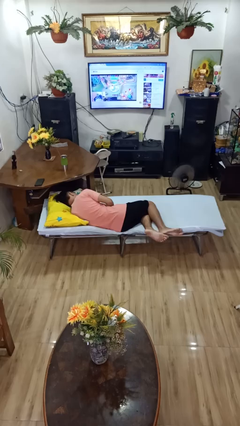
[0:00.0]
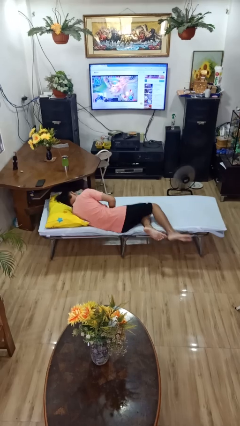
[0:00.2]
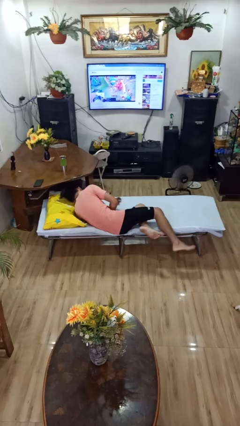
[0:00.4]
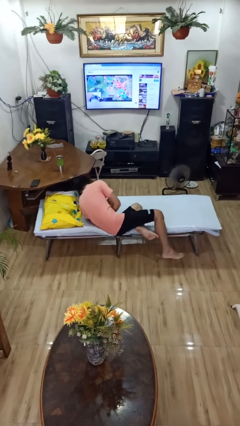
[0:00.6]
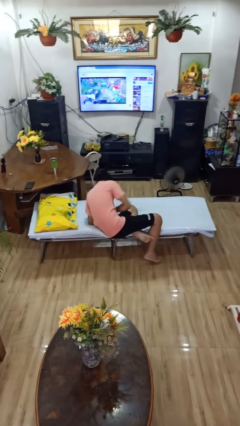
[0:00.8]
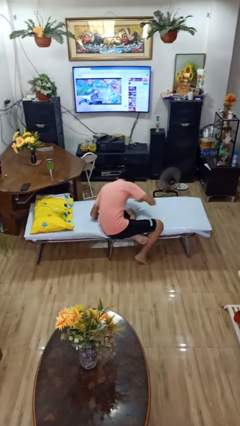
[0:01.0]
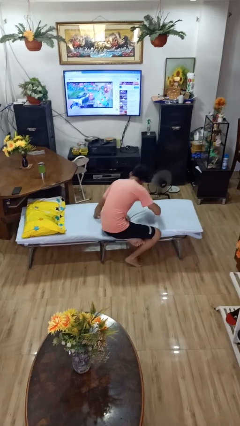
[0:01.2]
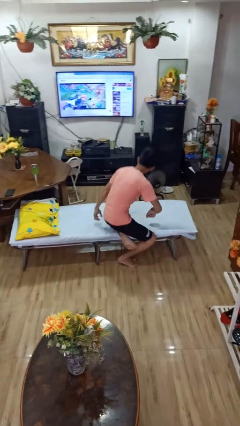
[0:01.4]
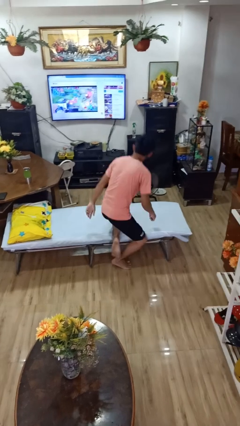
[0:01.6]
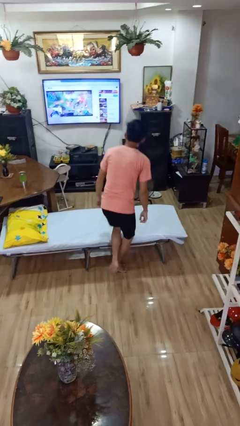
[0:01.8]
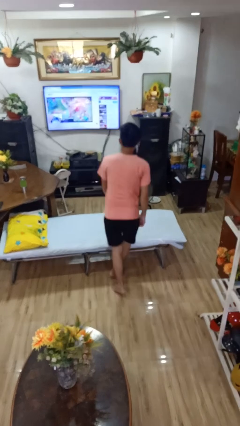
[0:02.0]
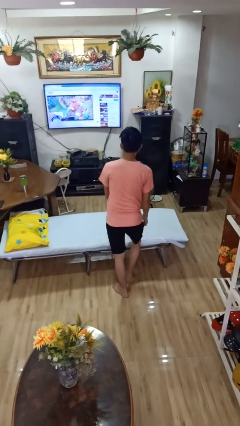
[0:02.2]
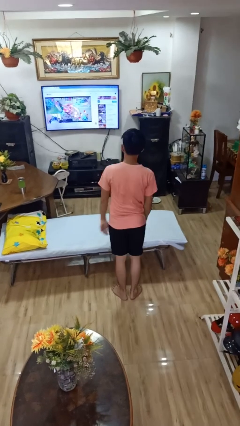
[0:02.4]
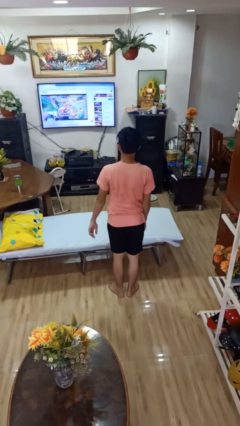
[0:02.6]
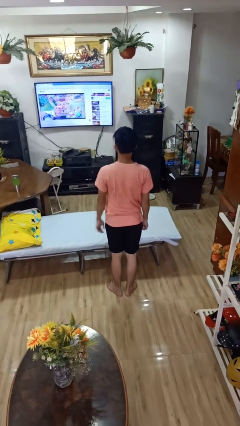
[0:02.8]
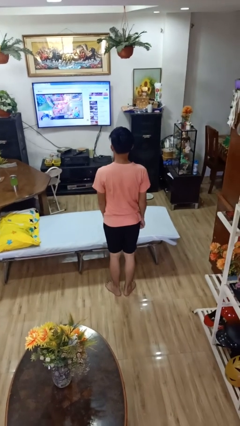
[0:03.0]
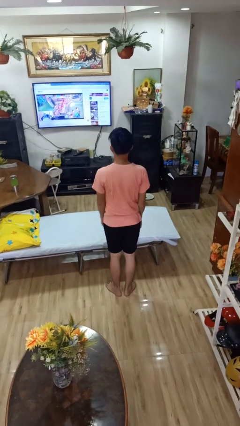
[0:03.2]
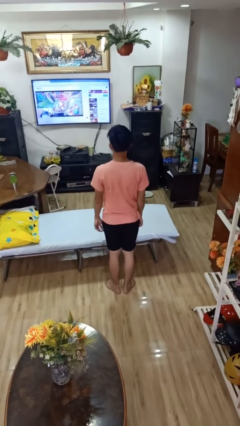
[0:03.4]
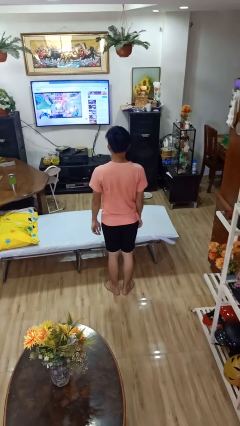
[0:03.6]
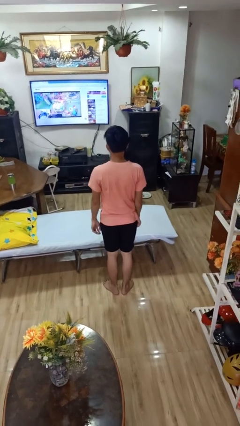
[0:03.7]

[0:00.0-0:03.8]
person stands up

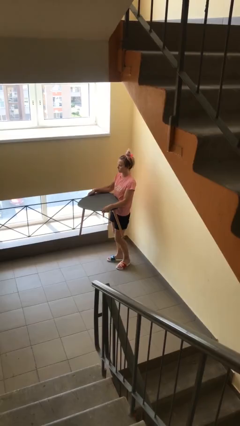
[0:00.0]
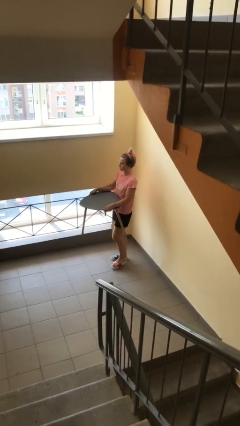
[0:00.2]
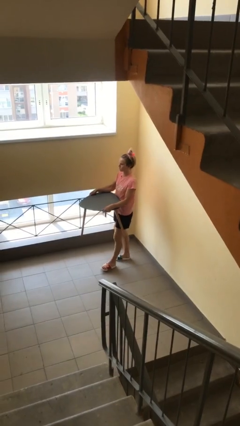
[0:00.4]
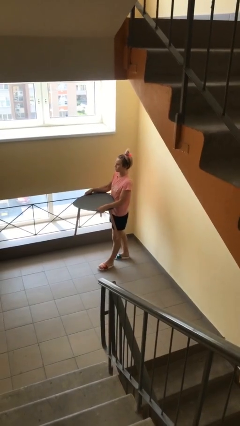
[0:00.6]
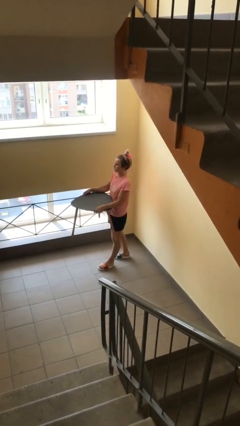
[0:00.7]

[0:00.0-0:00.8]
person carries furniture

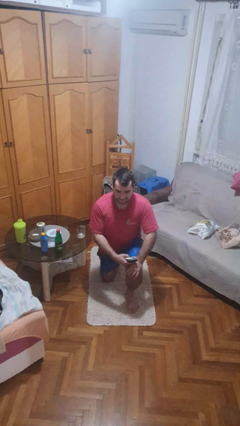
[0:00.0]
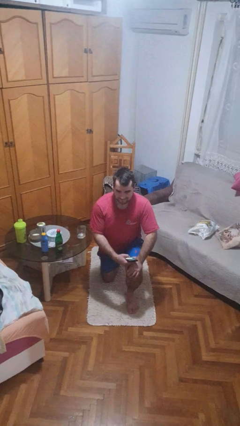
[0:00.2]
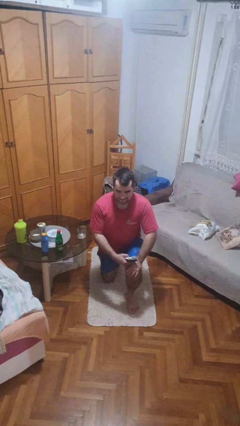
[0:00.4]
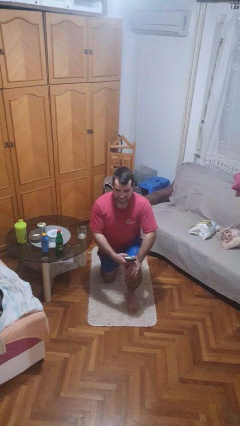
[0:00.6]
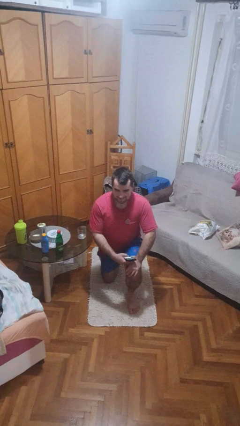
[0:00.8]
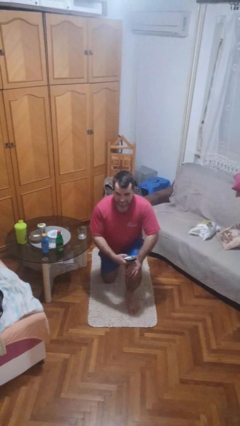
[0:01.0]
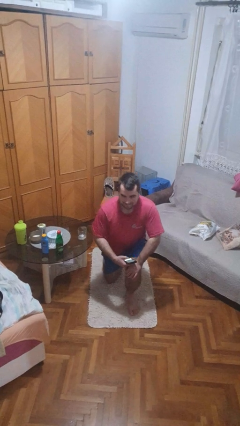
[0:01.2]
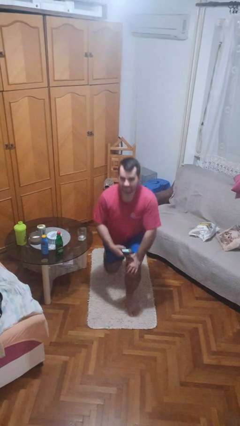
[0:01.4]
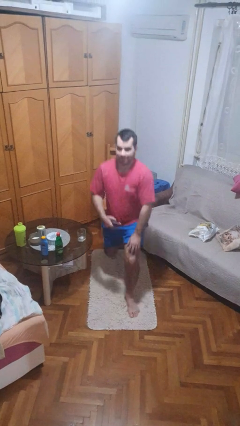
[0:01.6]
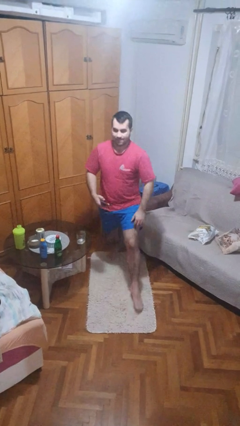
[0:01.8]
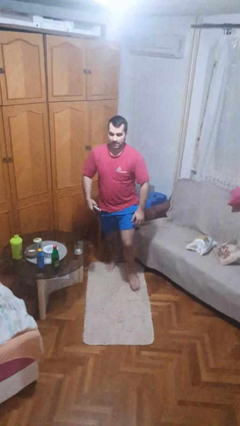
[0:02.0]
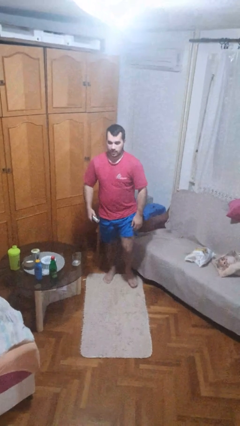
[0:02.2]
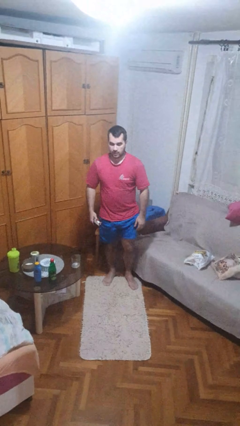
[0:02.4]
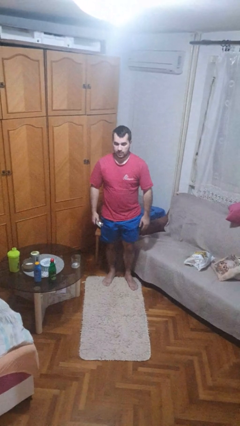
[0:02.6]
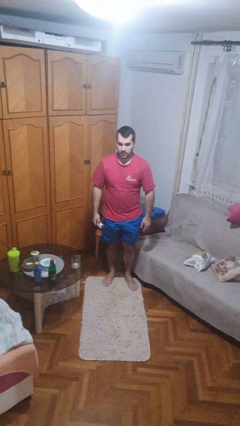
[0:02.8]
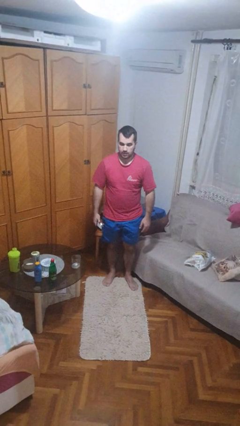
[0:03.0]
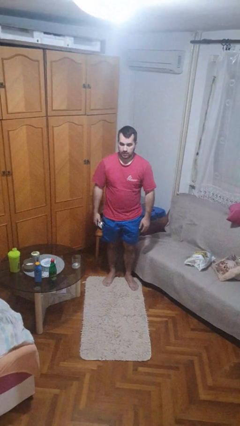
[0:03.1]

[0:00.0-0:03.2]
person stands up from floor

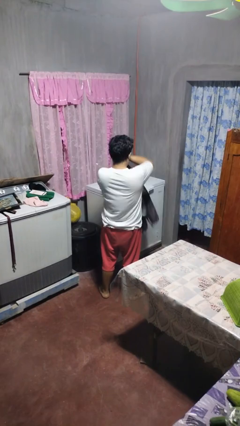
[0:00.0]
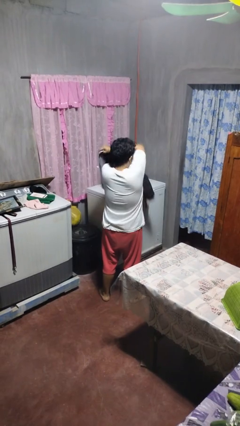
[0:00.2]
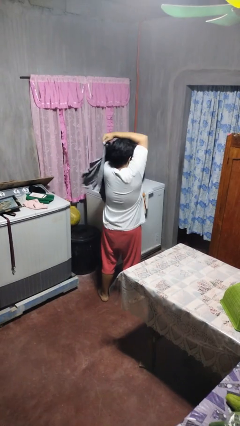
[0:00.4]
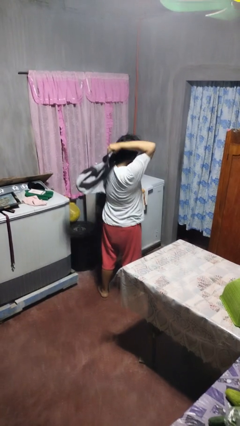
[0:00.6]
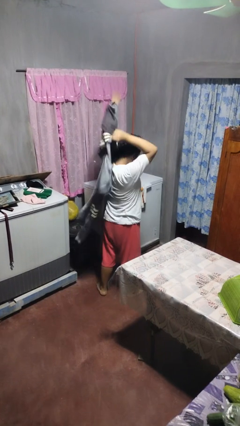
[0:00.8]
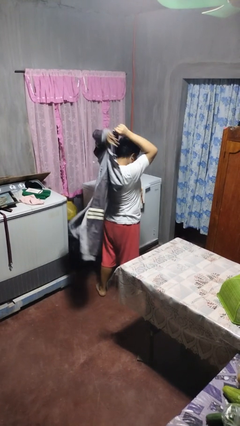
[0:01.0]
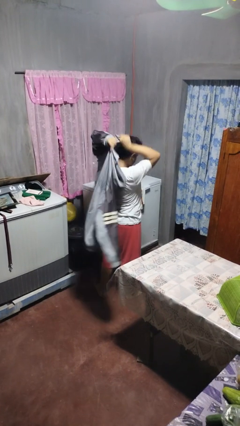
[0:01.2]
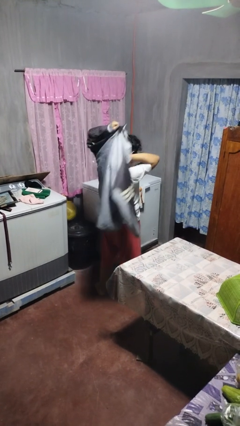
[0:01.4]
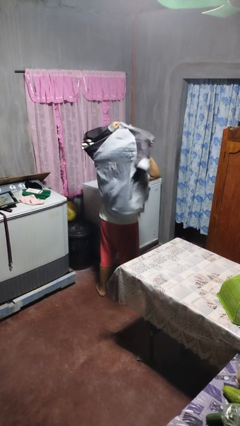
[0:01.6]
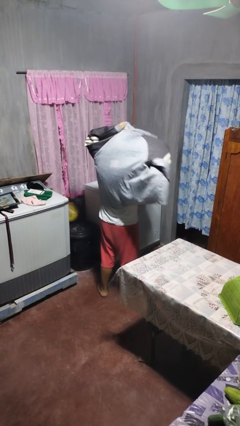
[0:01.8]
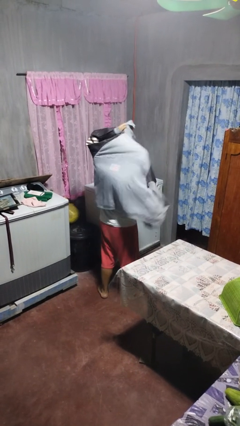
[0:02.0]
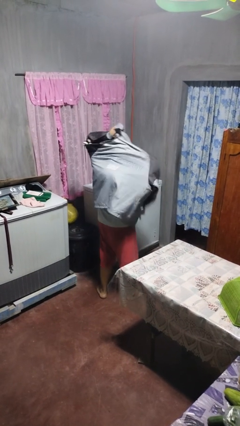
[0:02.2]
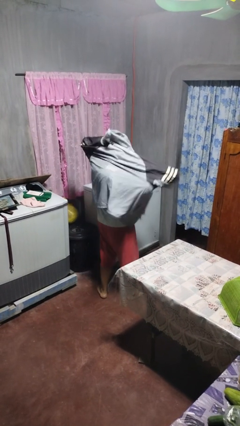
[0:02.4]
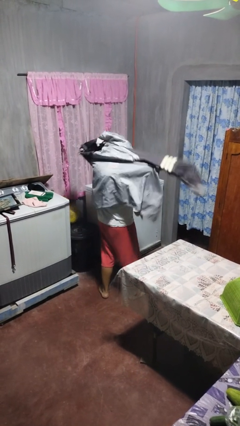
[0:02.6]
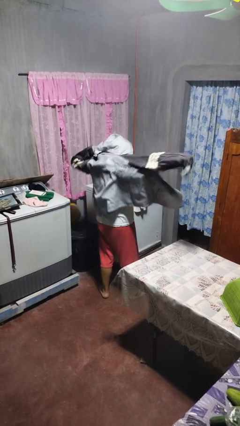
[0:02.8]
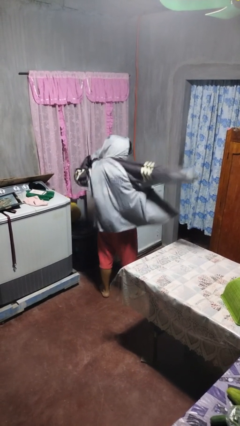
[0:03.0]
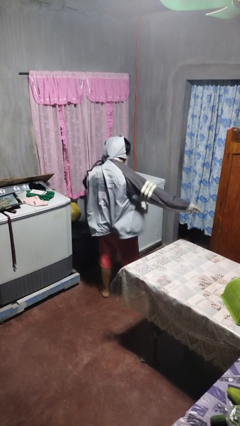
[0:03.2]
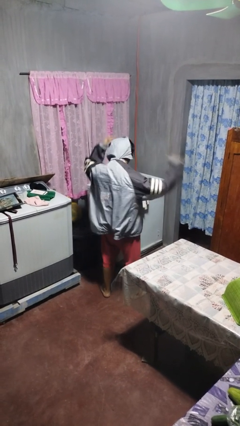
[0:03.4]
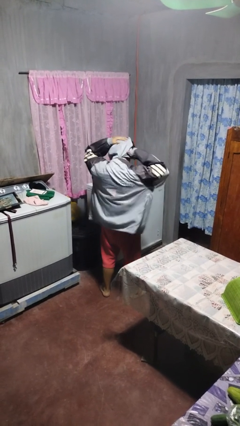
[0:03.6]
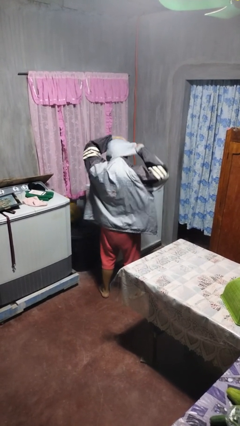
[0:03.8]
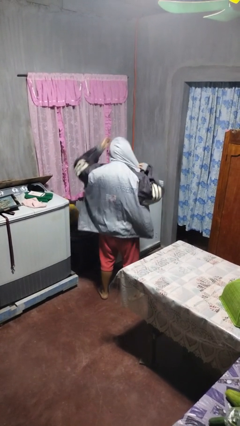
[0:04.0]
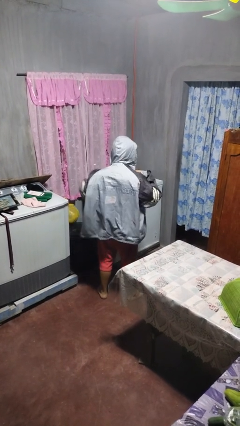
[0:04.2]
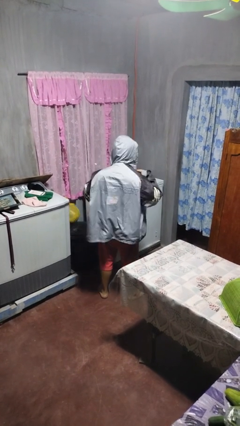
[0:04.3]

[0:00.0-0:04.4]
person puts on hoodie

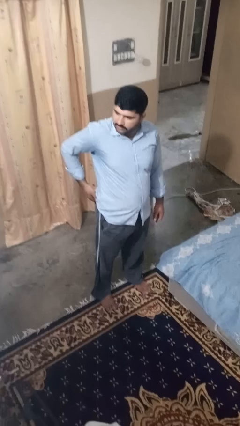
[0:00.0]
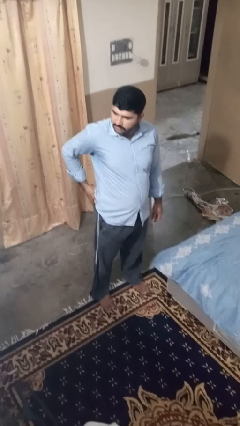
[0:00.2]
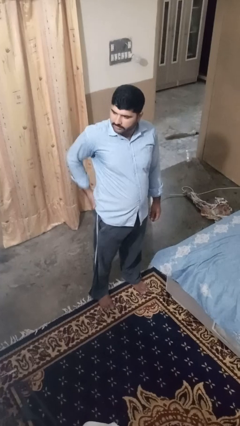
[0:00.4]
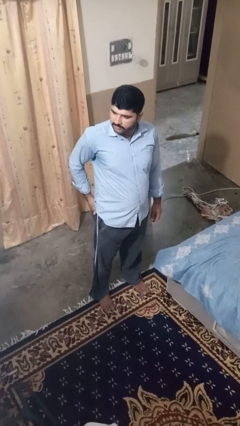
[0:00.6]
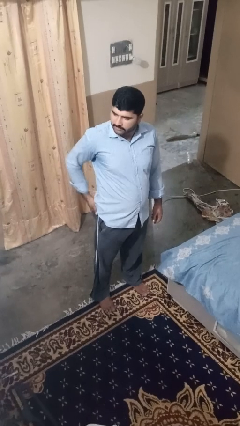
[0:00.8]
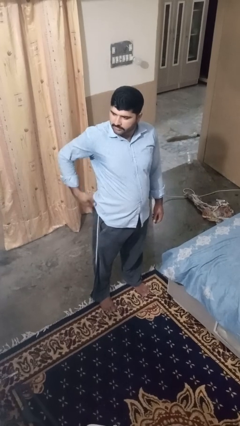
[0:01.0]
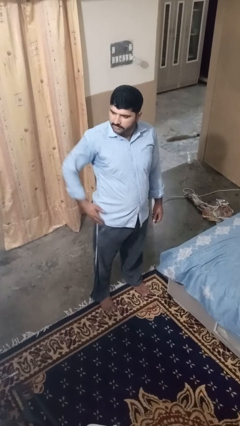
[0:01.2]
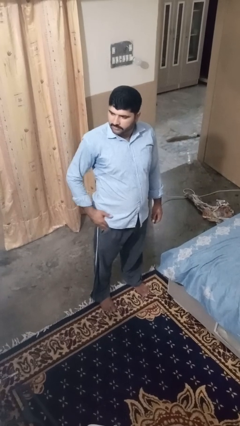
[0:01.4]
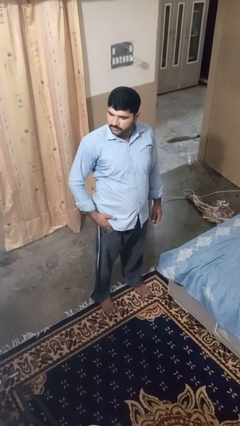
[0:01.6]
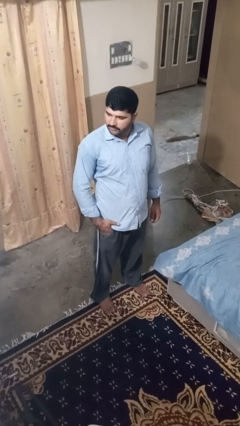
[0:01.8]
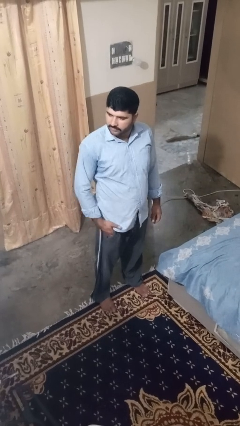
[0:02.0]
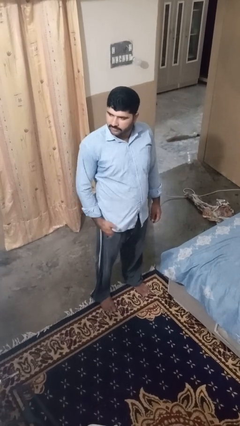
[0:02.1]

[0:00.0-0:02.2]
person puts hands in back pockets

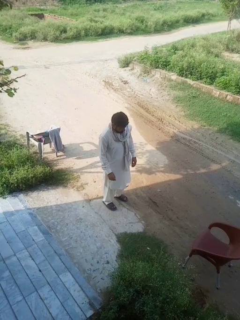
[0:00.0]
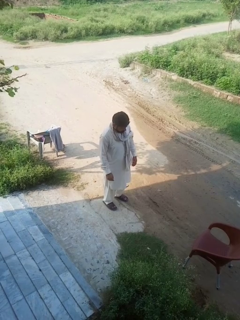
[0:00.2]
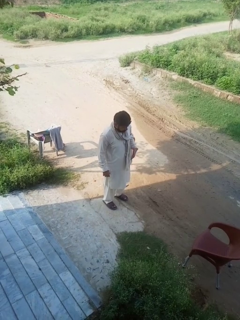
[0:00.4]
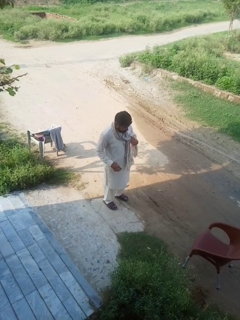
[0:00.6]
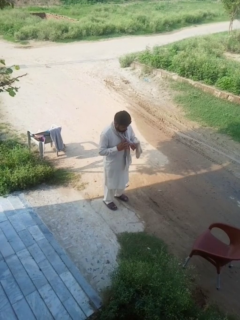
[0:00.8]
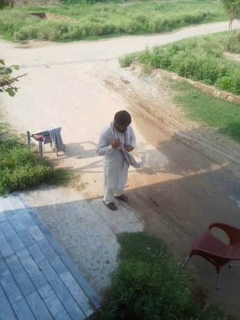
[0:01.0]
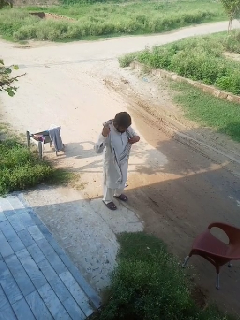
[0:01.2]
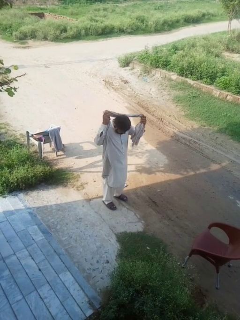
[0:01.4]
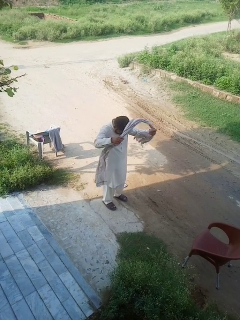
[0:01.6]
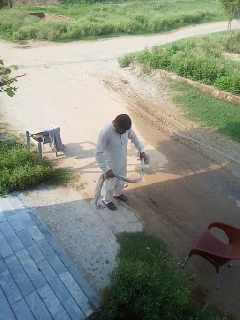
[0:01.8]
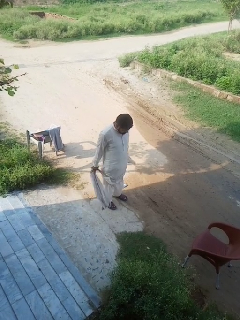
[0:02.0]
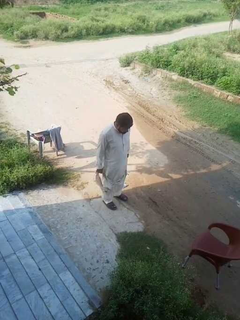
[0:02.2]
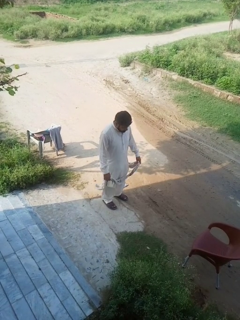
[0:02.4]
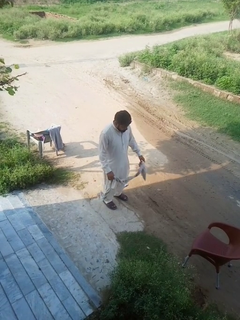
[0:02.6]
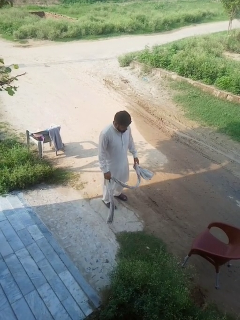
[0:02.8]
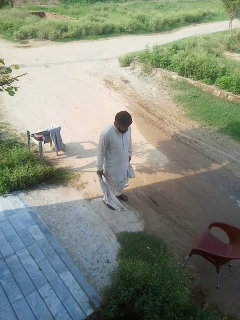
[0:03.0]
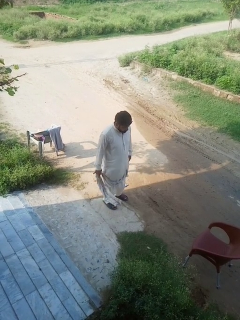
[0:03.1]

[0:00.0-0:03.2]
person takes off scarf

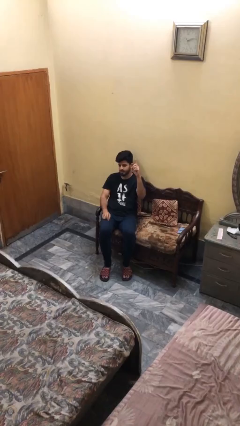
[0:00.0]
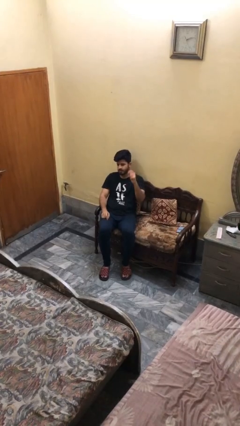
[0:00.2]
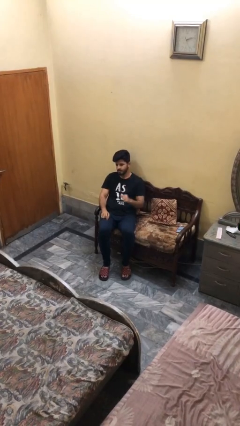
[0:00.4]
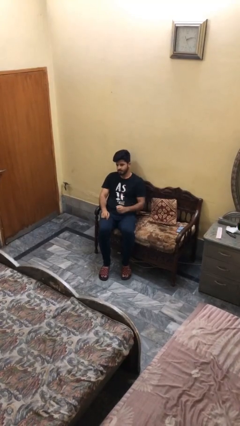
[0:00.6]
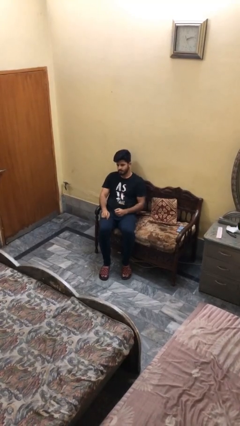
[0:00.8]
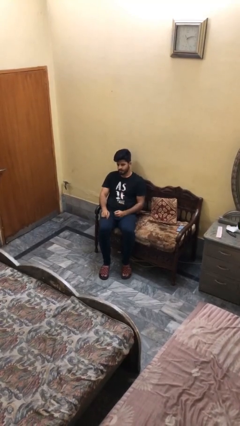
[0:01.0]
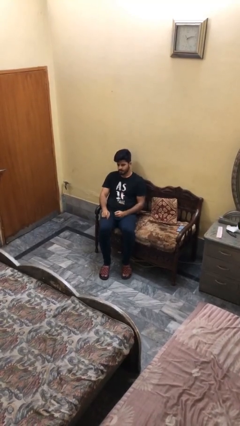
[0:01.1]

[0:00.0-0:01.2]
person gestures lower hand
